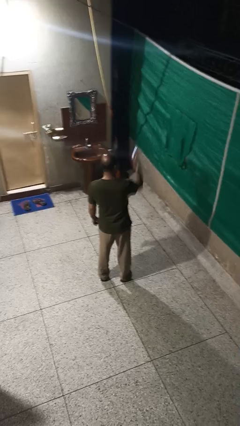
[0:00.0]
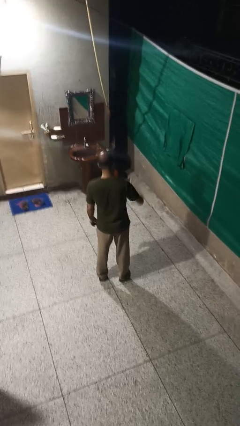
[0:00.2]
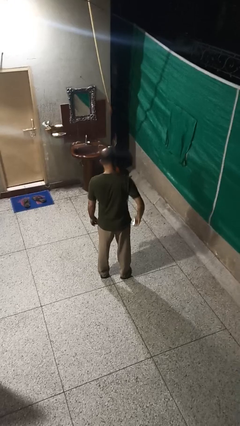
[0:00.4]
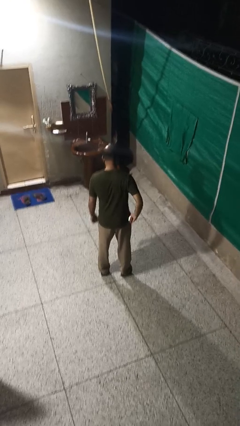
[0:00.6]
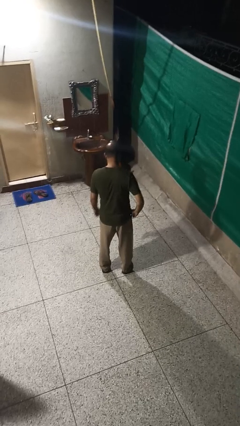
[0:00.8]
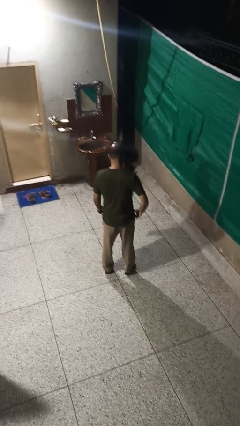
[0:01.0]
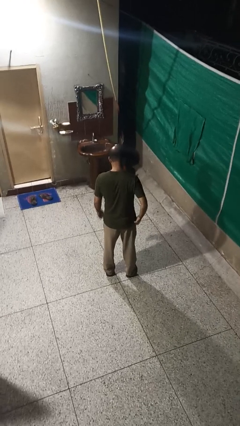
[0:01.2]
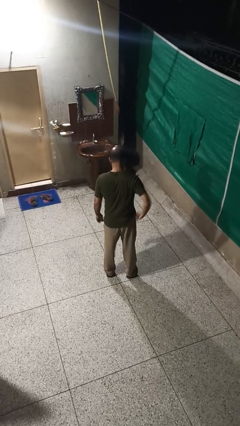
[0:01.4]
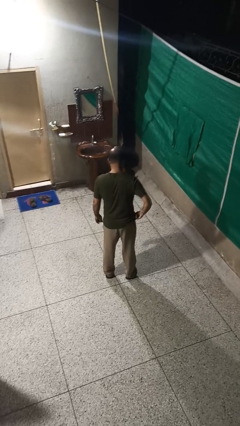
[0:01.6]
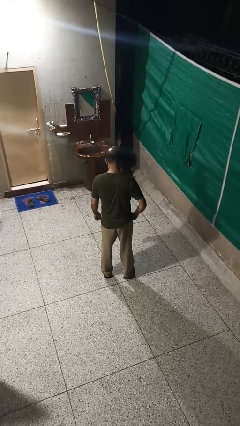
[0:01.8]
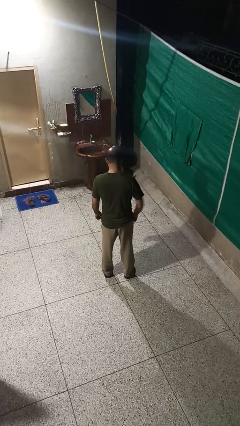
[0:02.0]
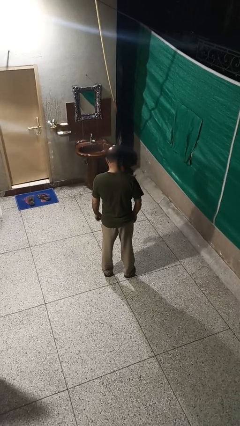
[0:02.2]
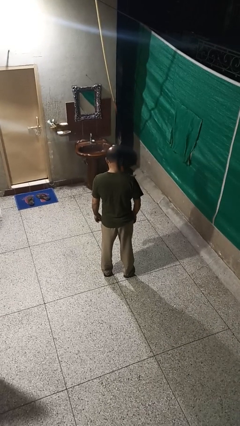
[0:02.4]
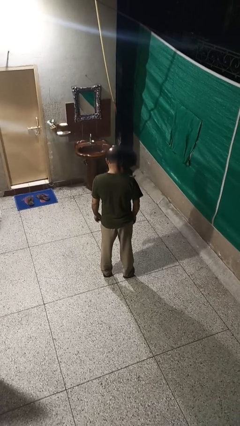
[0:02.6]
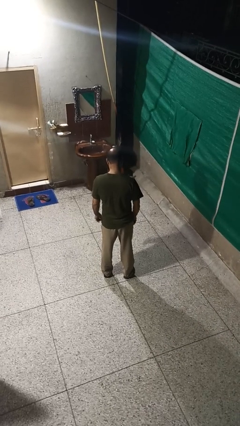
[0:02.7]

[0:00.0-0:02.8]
person puts phone into pocket

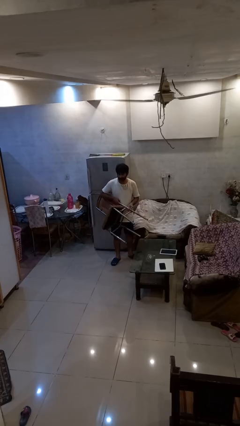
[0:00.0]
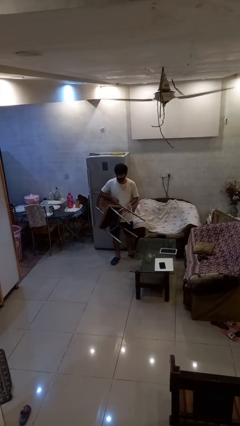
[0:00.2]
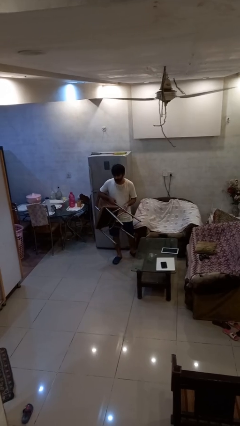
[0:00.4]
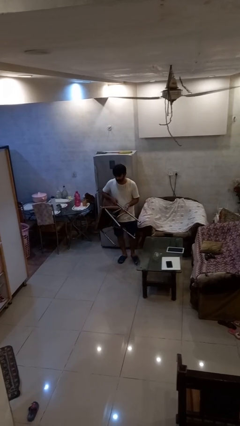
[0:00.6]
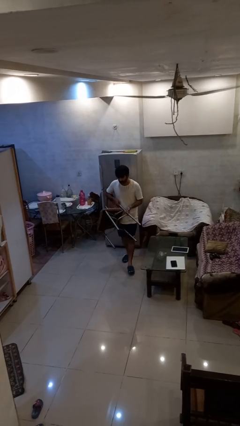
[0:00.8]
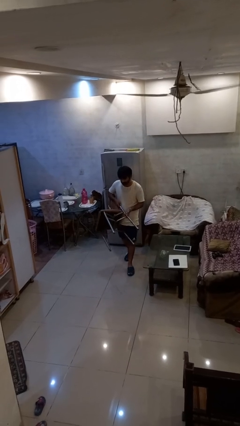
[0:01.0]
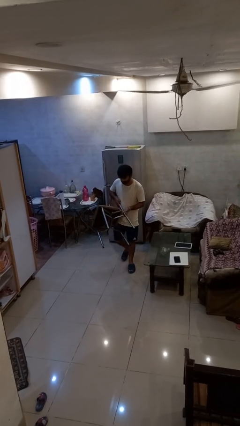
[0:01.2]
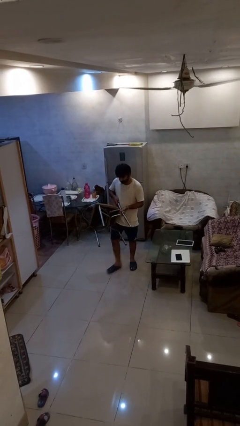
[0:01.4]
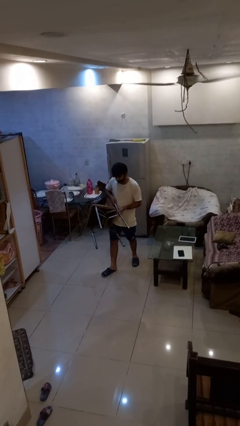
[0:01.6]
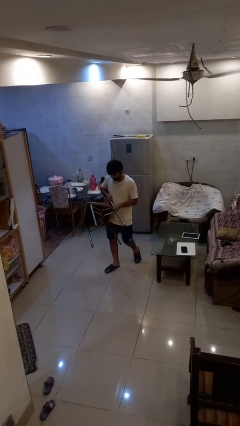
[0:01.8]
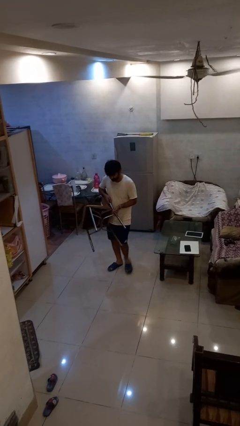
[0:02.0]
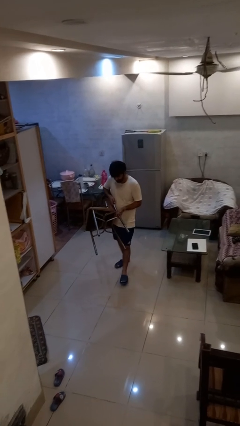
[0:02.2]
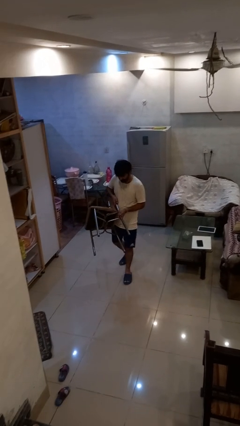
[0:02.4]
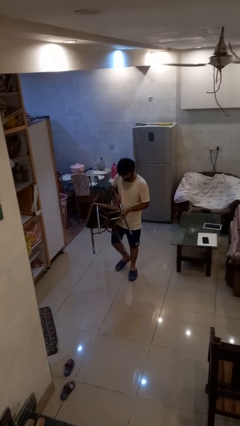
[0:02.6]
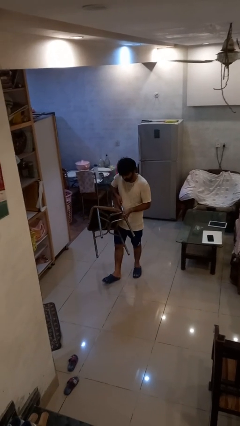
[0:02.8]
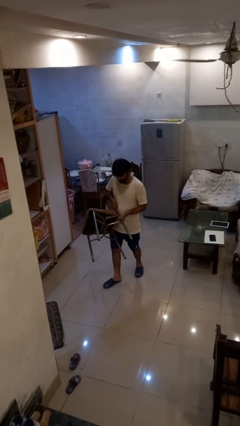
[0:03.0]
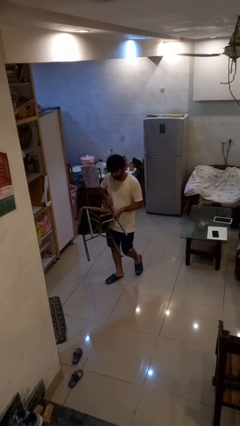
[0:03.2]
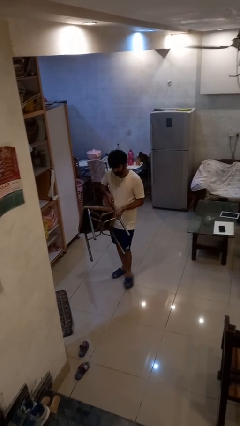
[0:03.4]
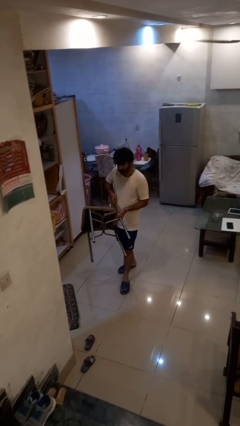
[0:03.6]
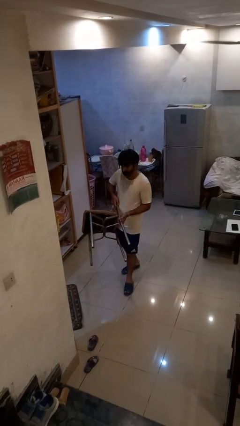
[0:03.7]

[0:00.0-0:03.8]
person carries furniture

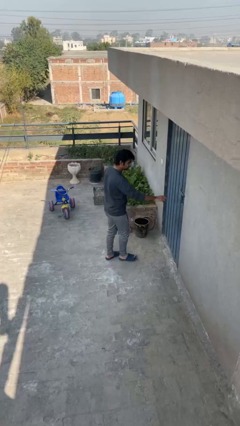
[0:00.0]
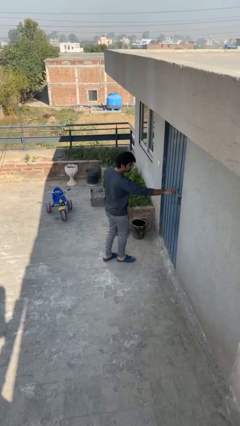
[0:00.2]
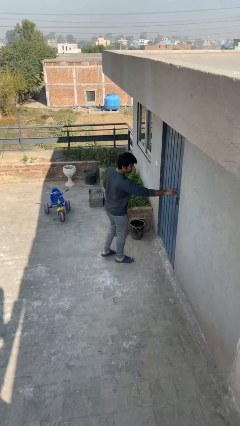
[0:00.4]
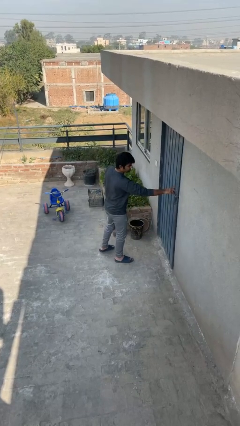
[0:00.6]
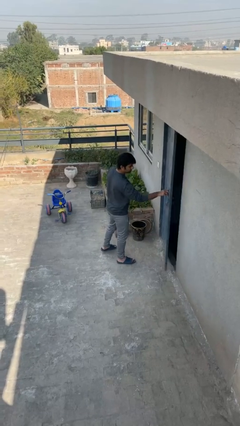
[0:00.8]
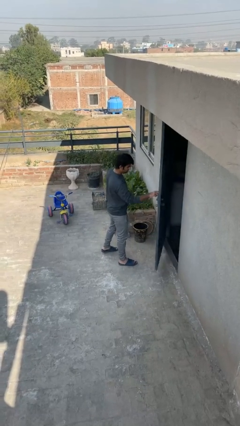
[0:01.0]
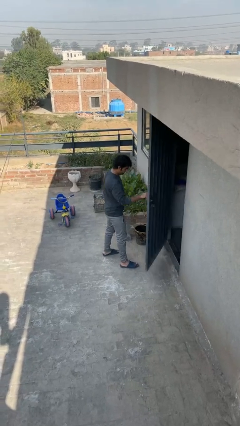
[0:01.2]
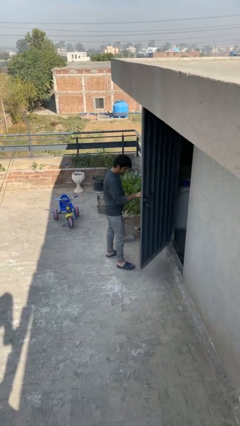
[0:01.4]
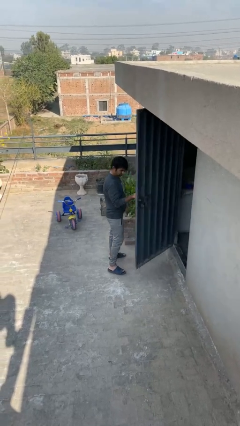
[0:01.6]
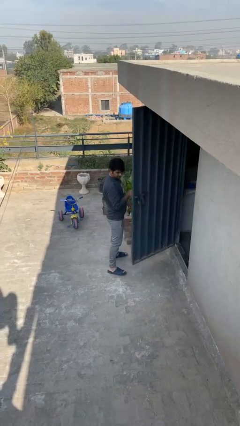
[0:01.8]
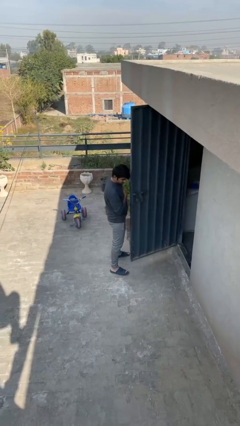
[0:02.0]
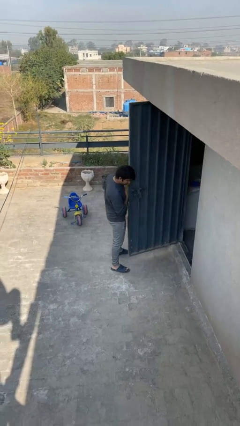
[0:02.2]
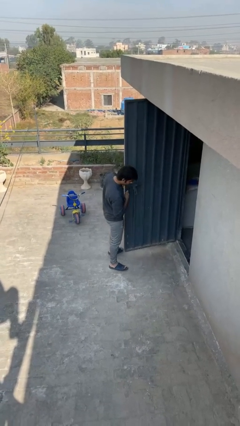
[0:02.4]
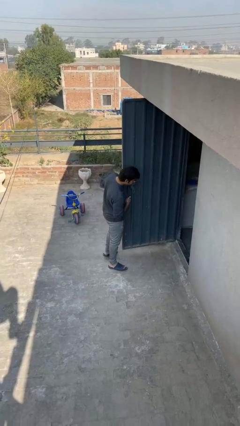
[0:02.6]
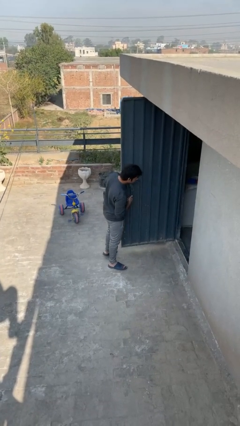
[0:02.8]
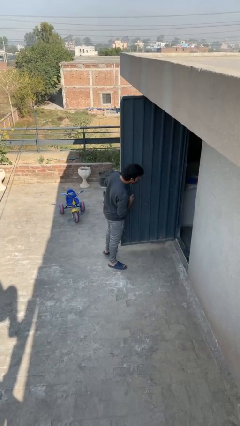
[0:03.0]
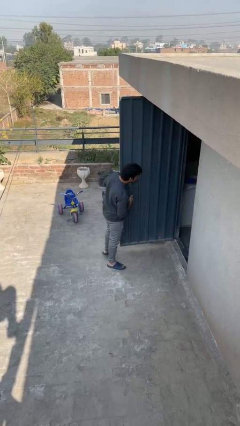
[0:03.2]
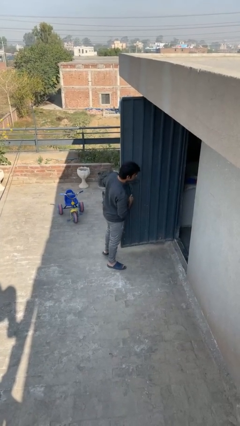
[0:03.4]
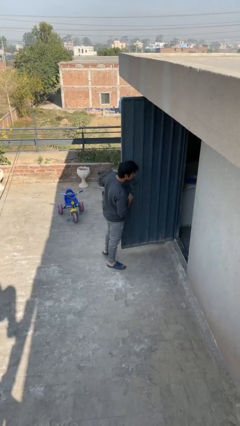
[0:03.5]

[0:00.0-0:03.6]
person opens facility door

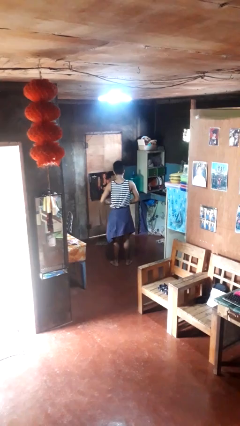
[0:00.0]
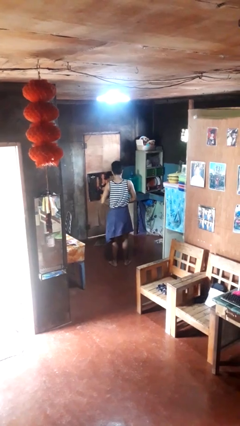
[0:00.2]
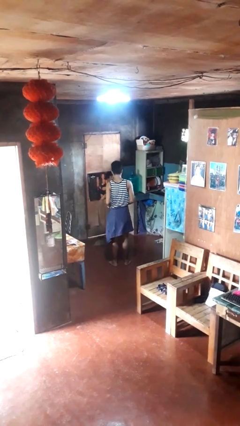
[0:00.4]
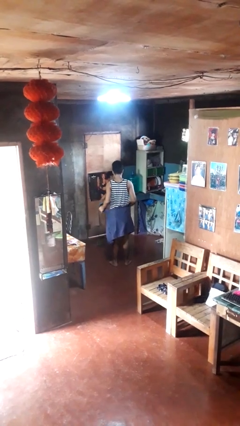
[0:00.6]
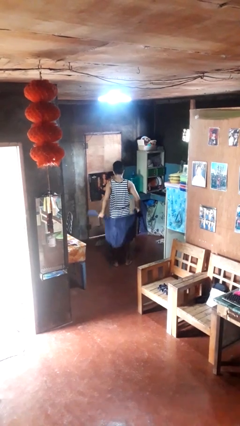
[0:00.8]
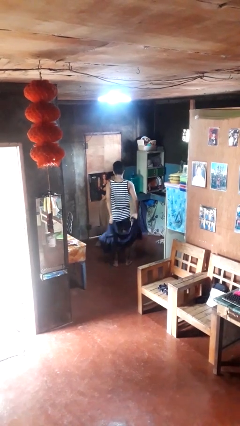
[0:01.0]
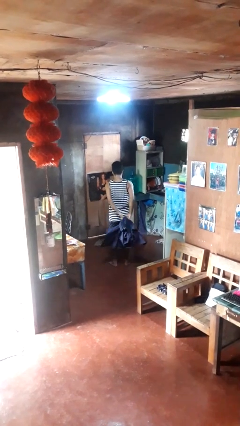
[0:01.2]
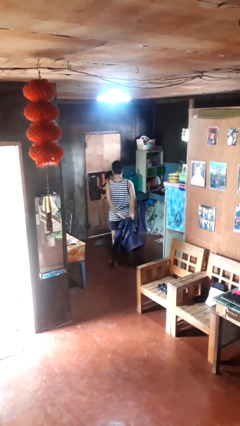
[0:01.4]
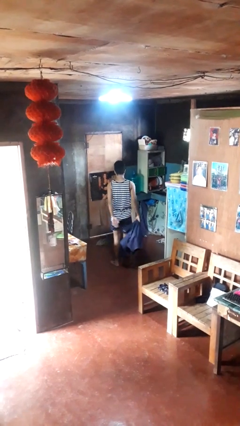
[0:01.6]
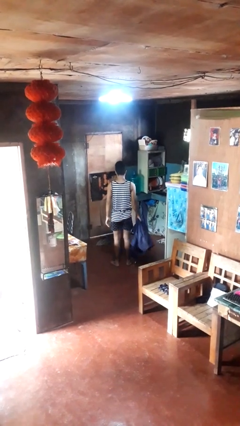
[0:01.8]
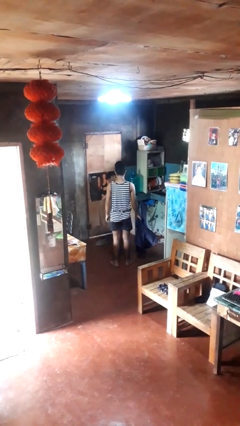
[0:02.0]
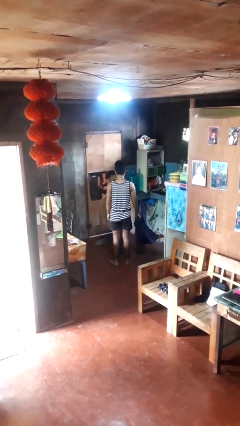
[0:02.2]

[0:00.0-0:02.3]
person unties jacket around waist

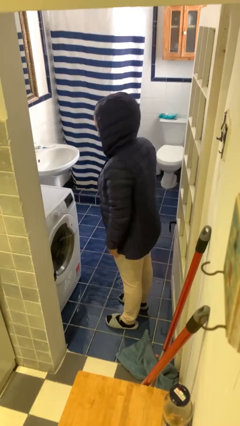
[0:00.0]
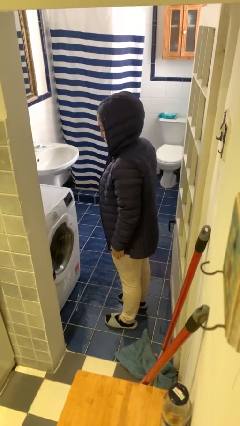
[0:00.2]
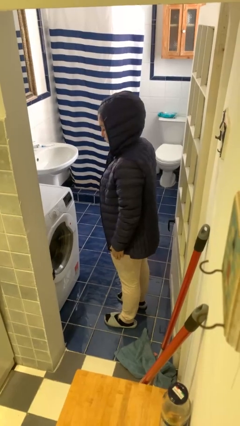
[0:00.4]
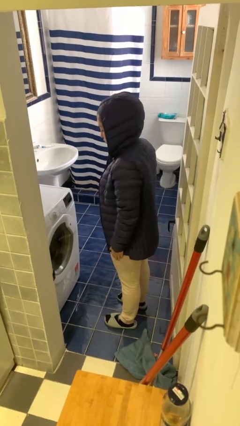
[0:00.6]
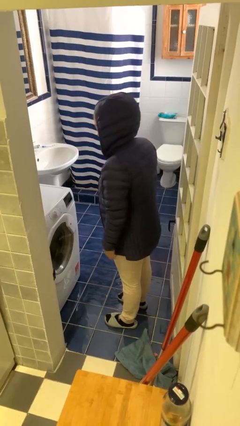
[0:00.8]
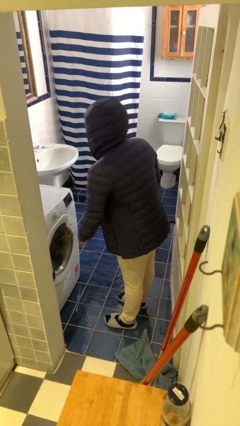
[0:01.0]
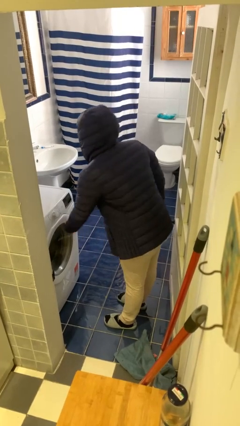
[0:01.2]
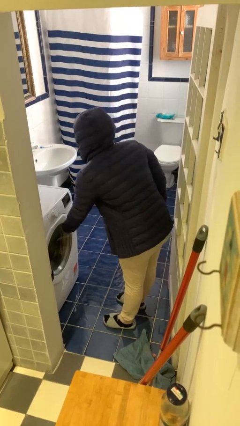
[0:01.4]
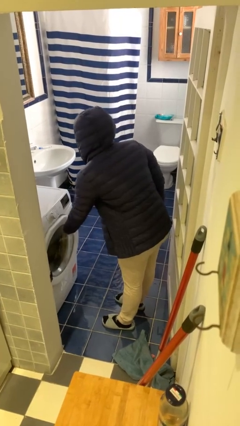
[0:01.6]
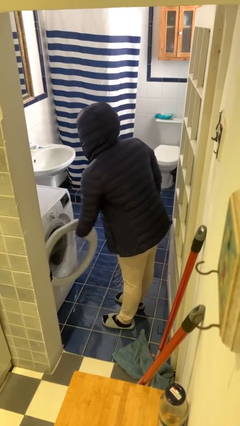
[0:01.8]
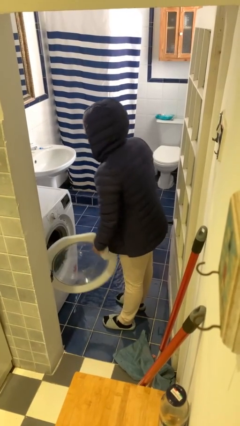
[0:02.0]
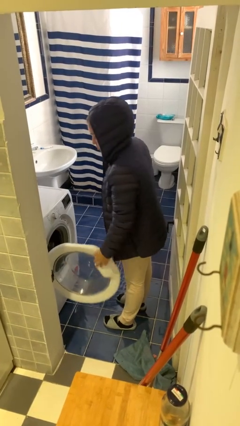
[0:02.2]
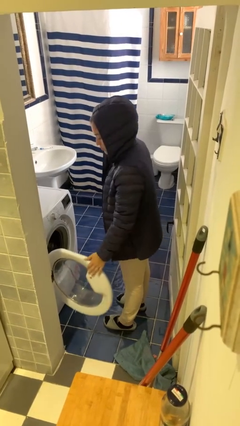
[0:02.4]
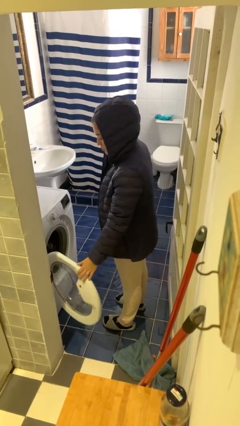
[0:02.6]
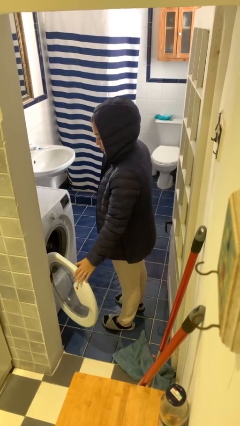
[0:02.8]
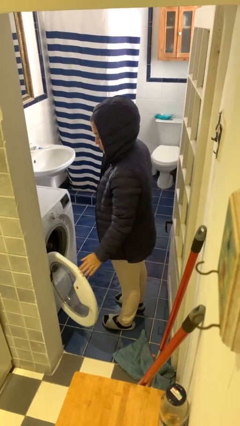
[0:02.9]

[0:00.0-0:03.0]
person opens clothes washer

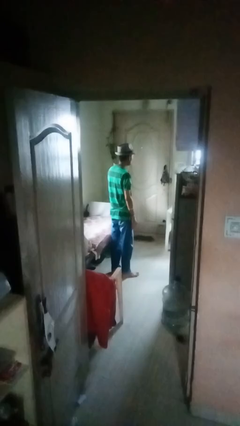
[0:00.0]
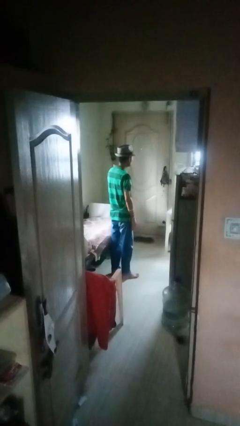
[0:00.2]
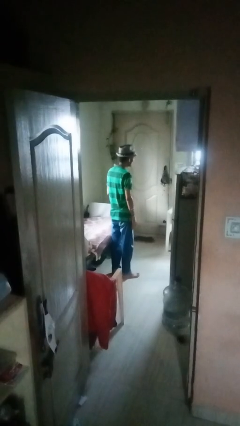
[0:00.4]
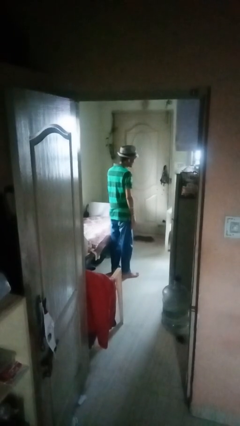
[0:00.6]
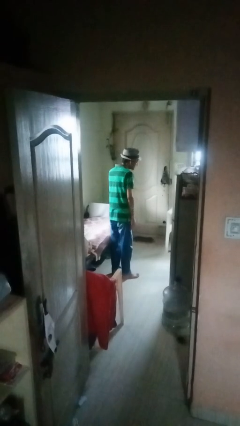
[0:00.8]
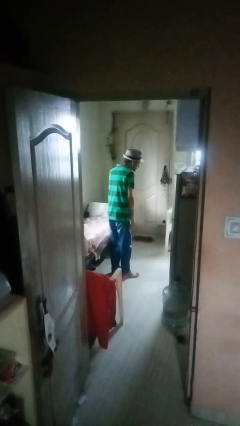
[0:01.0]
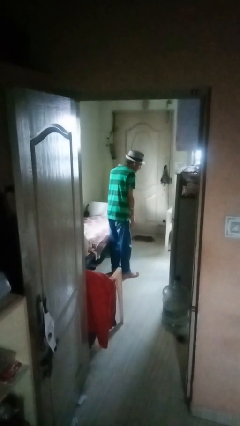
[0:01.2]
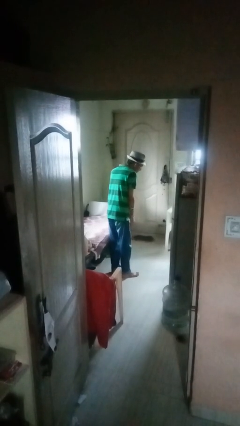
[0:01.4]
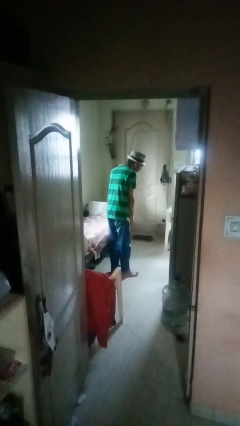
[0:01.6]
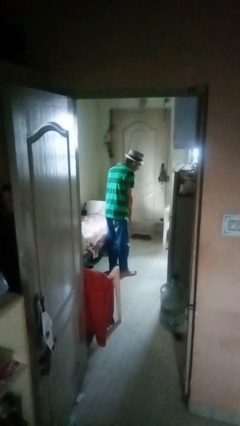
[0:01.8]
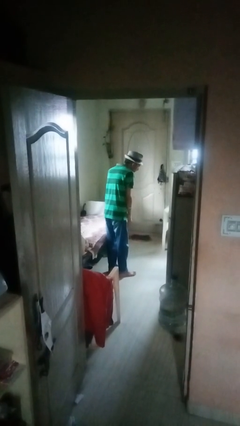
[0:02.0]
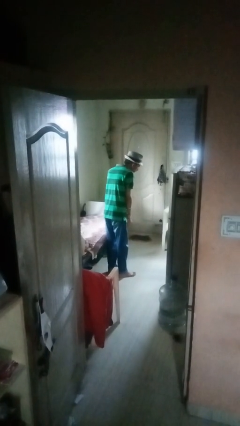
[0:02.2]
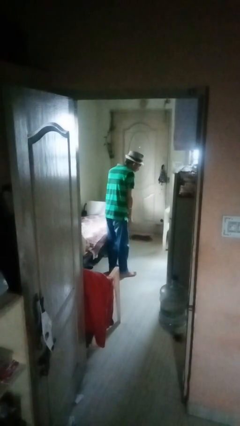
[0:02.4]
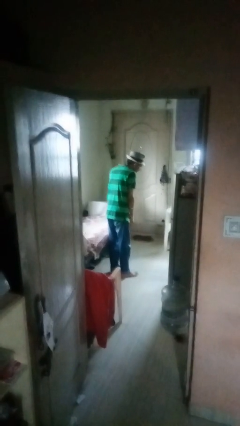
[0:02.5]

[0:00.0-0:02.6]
person gestures listen closely
